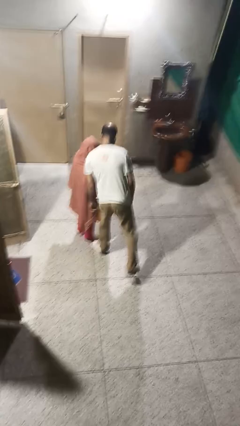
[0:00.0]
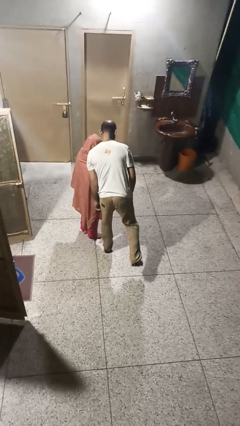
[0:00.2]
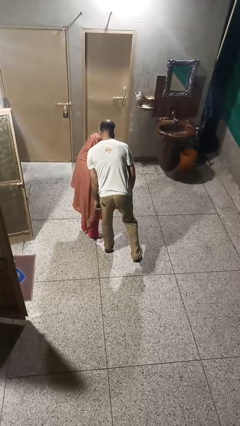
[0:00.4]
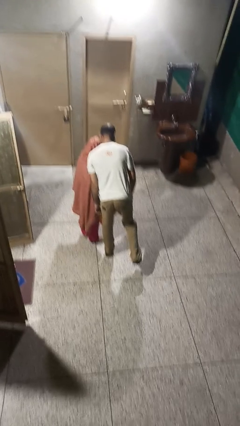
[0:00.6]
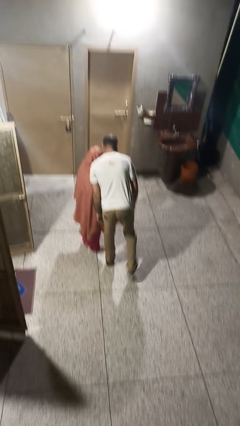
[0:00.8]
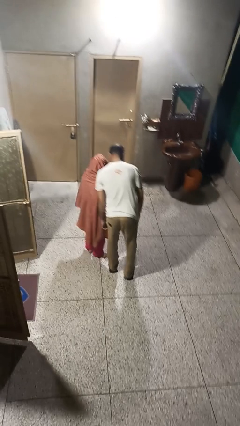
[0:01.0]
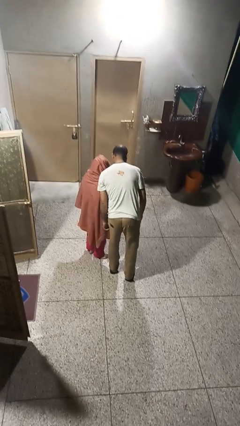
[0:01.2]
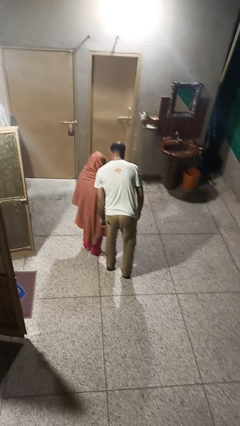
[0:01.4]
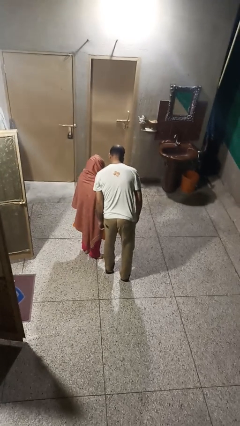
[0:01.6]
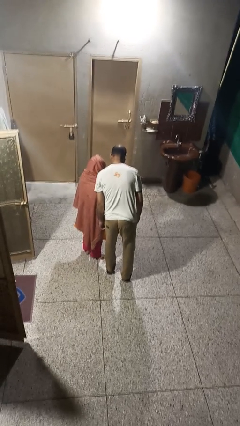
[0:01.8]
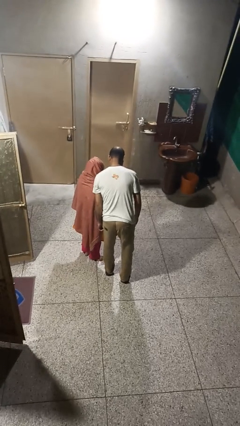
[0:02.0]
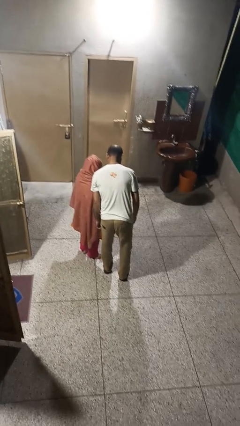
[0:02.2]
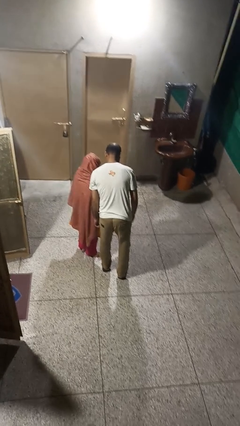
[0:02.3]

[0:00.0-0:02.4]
person bumps into person

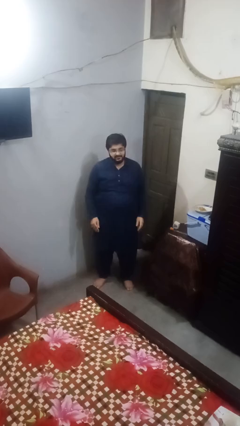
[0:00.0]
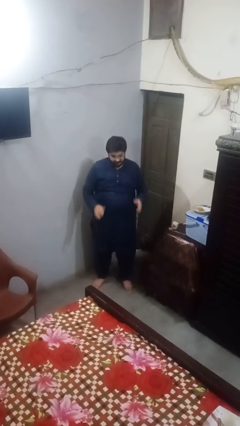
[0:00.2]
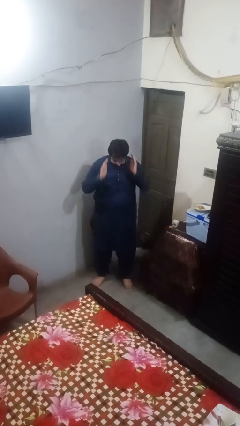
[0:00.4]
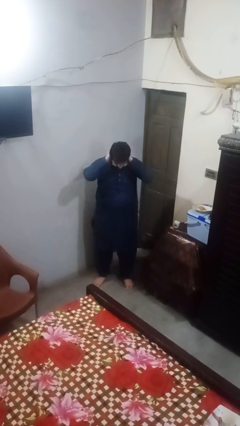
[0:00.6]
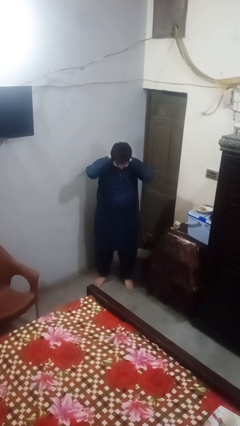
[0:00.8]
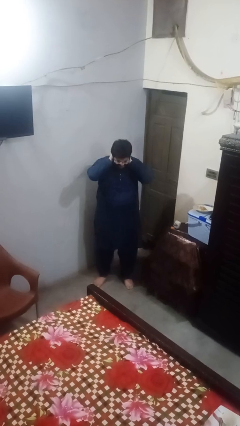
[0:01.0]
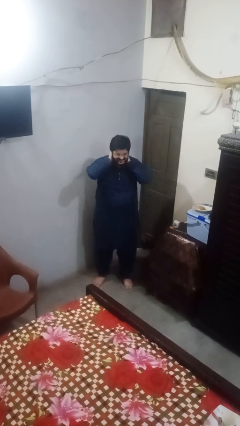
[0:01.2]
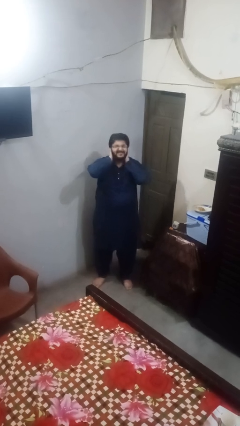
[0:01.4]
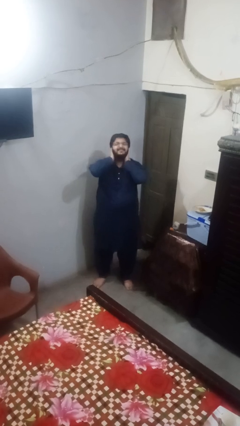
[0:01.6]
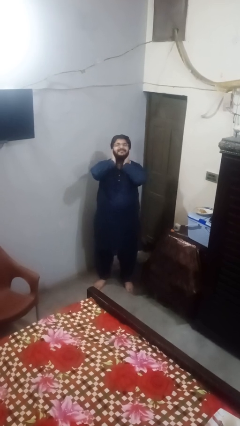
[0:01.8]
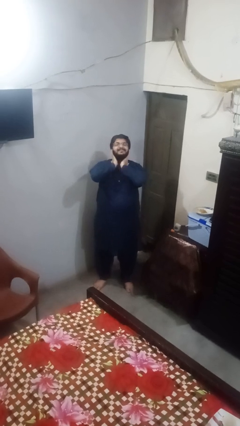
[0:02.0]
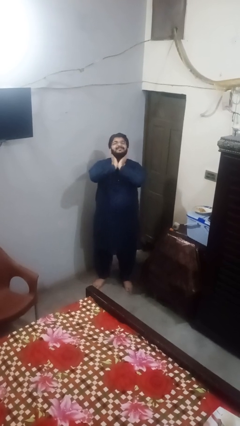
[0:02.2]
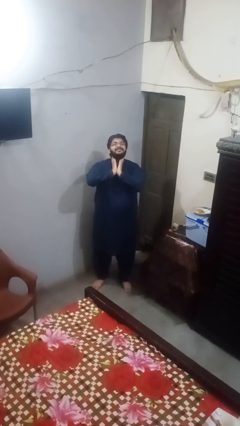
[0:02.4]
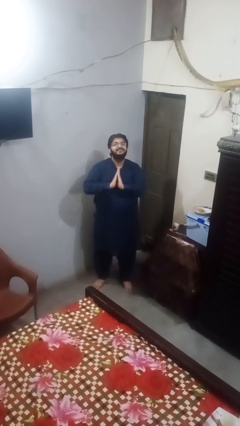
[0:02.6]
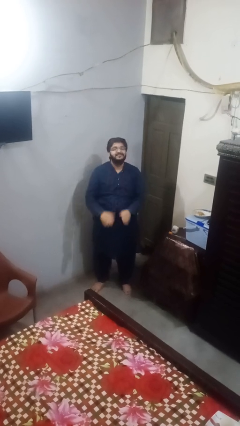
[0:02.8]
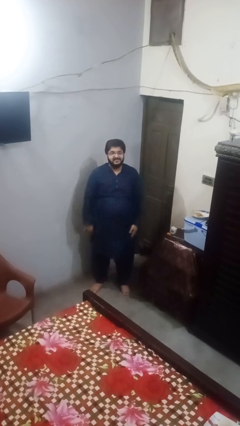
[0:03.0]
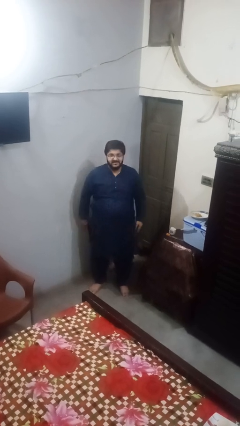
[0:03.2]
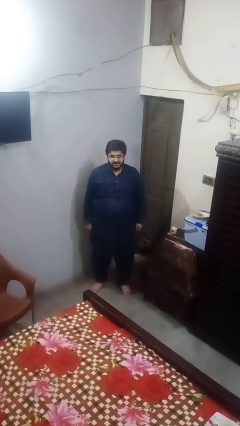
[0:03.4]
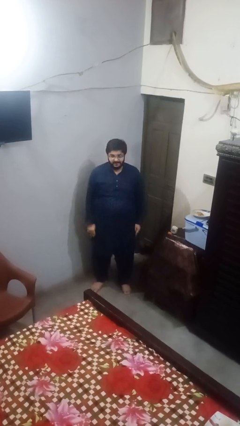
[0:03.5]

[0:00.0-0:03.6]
person rubs neck

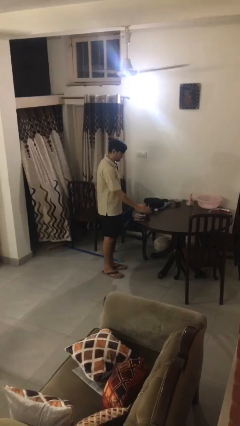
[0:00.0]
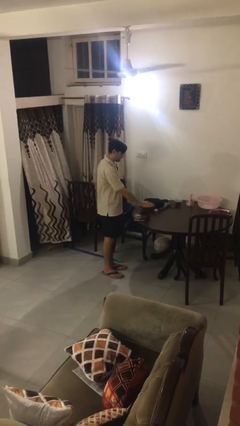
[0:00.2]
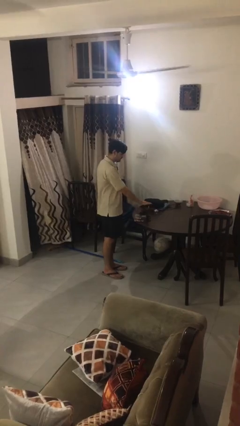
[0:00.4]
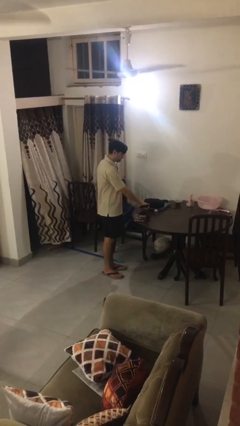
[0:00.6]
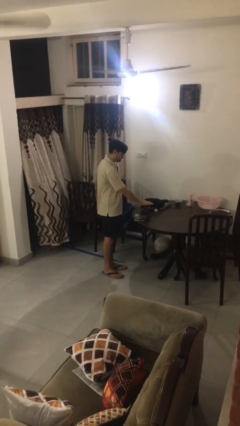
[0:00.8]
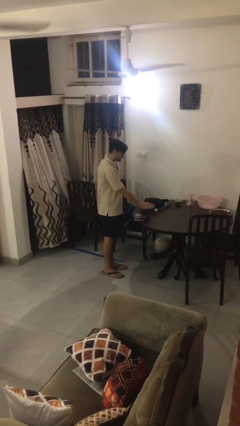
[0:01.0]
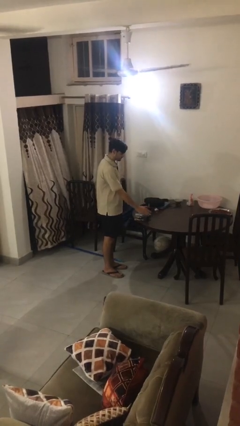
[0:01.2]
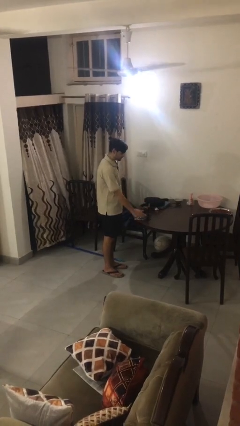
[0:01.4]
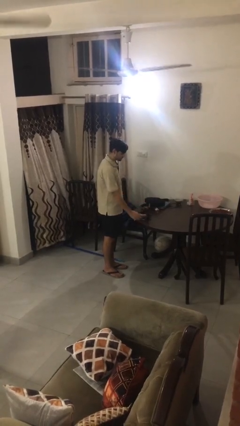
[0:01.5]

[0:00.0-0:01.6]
person waves hand over object

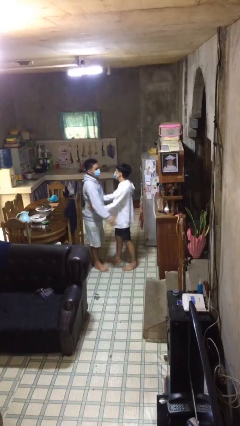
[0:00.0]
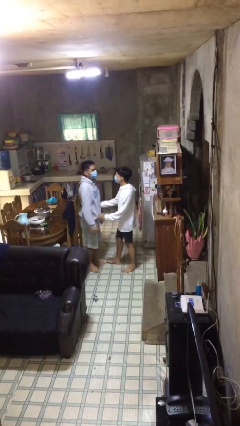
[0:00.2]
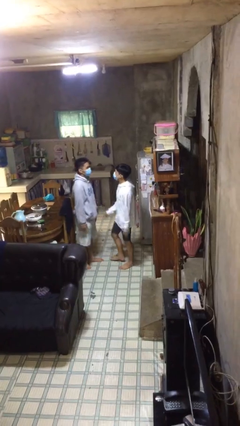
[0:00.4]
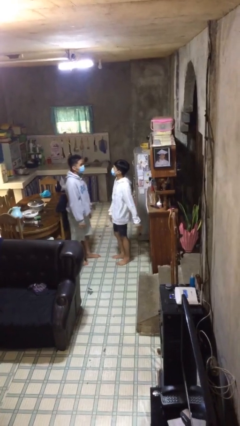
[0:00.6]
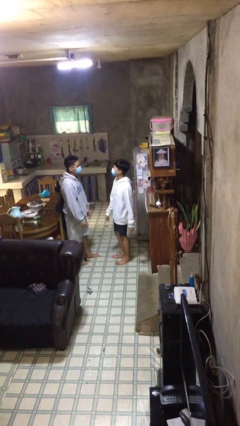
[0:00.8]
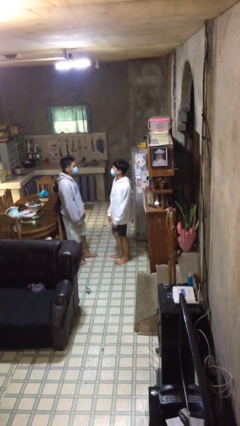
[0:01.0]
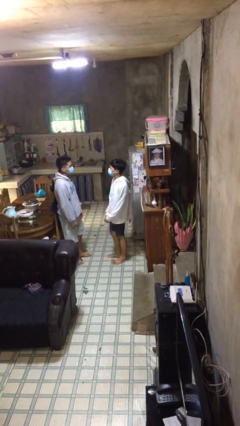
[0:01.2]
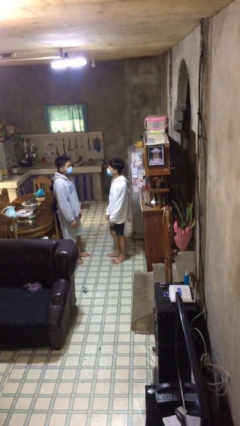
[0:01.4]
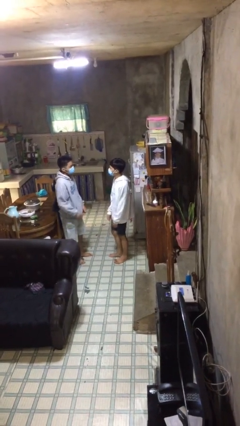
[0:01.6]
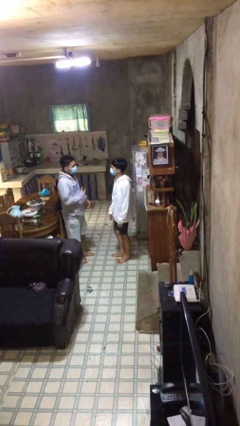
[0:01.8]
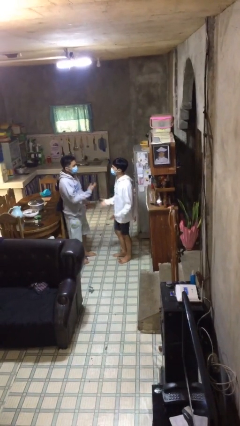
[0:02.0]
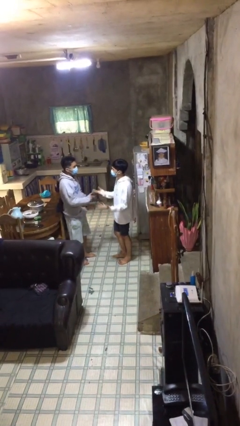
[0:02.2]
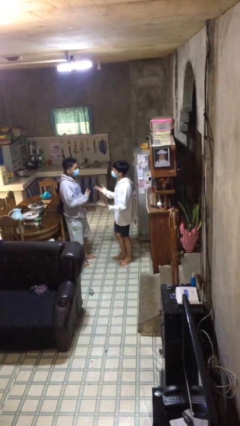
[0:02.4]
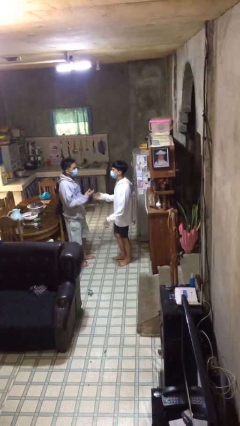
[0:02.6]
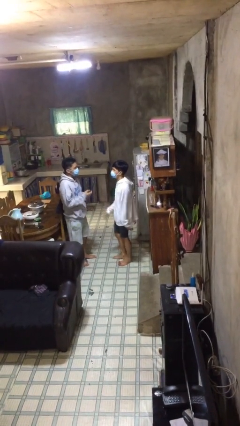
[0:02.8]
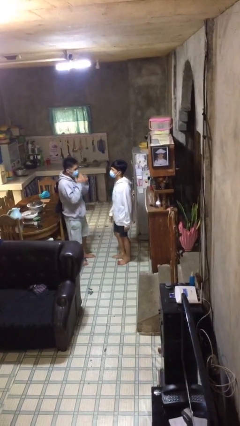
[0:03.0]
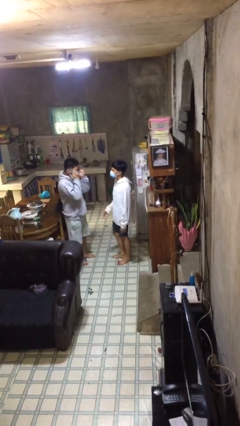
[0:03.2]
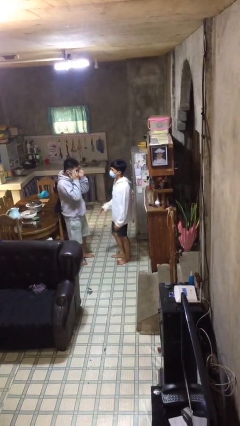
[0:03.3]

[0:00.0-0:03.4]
person talks to person

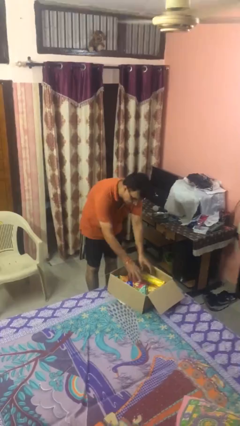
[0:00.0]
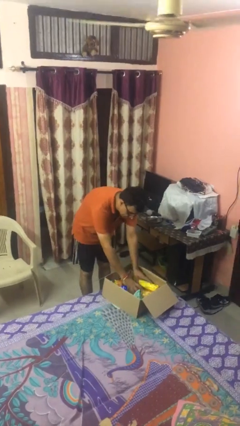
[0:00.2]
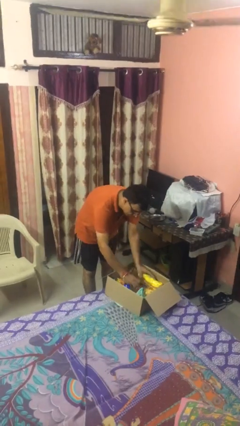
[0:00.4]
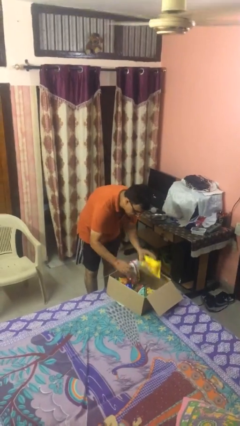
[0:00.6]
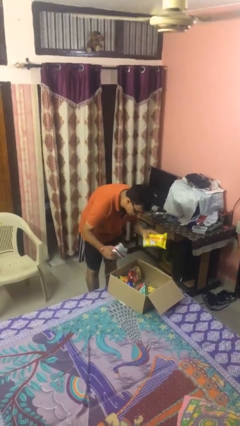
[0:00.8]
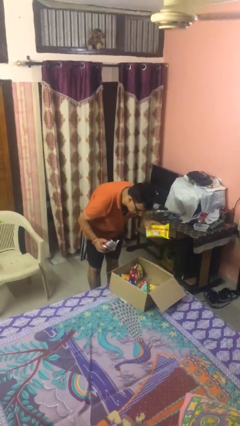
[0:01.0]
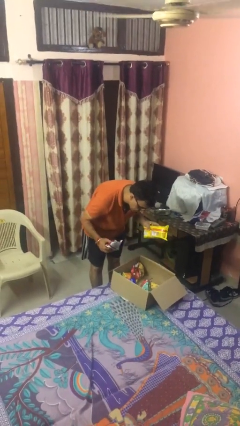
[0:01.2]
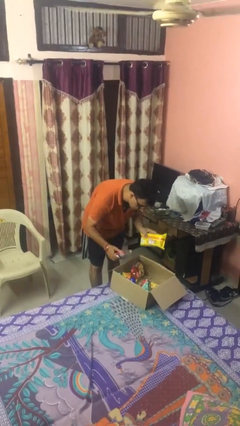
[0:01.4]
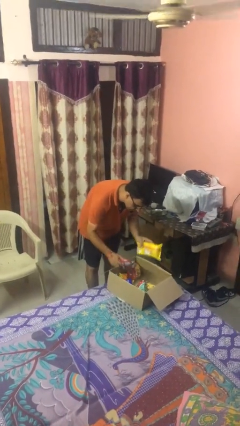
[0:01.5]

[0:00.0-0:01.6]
person searches in box

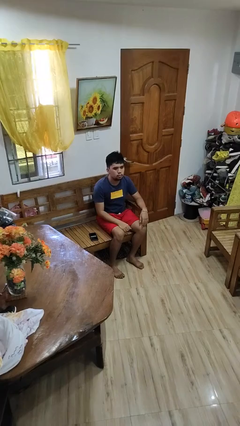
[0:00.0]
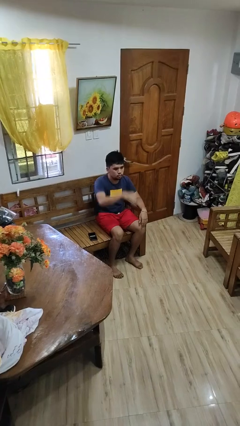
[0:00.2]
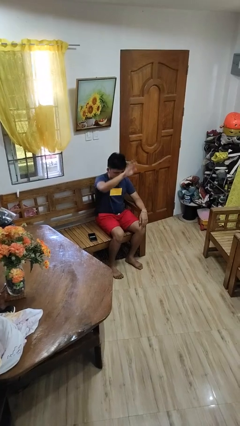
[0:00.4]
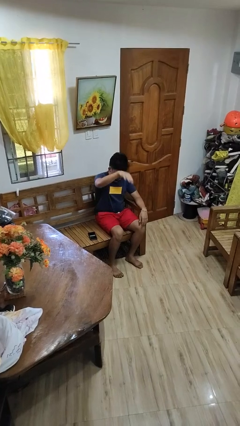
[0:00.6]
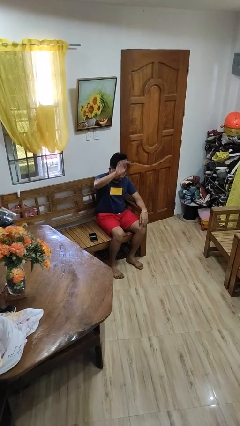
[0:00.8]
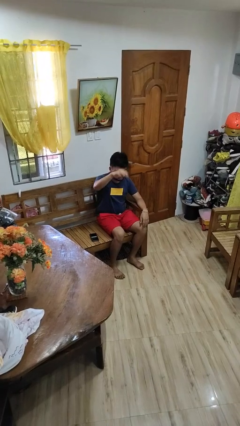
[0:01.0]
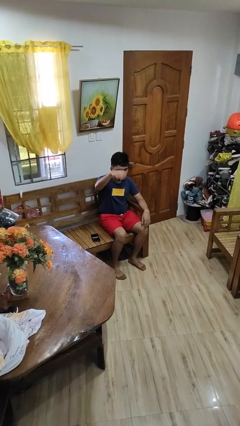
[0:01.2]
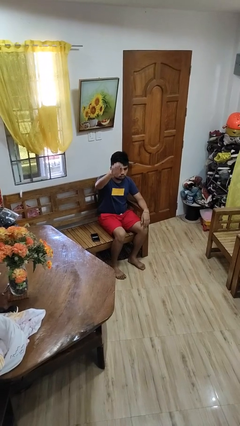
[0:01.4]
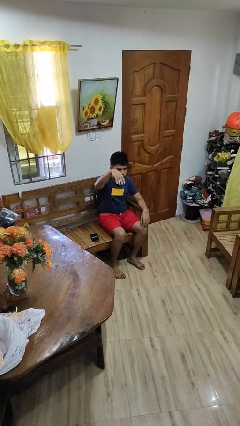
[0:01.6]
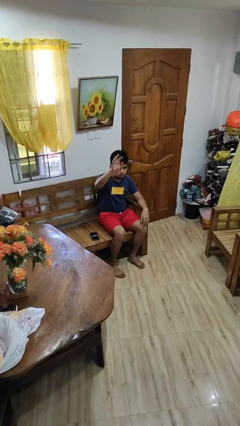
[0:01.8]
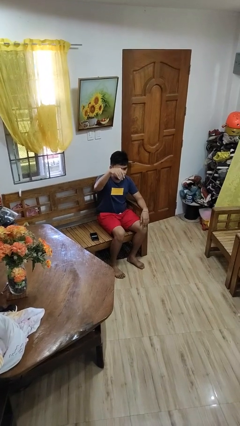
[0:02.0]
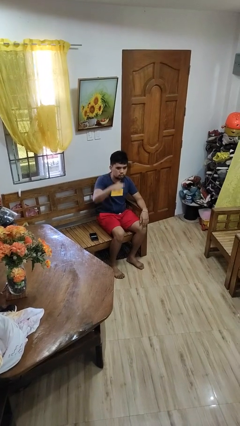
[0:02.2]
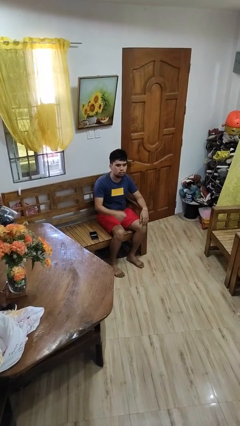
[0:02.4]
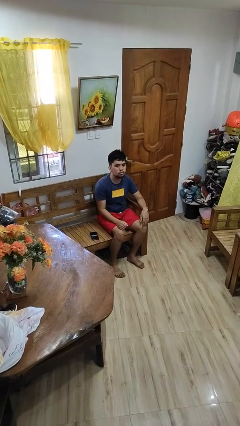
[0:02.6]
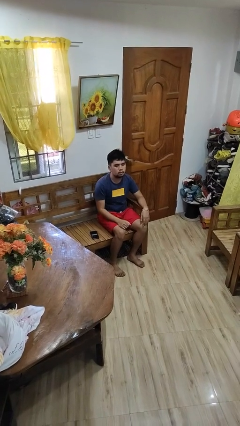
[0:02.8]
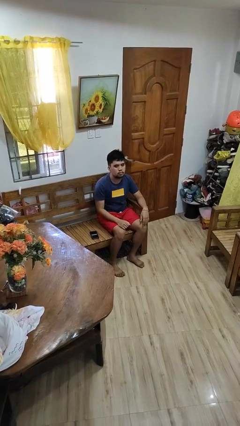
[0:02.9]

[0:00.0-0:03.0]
person gestures come here

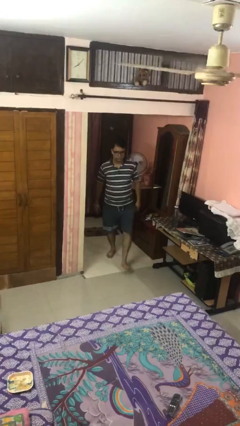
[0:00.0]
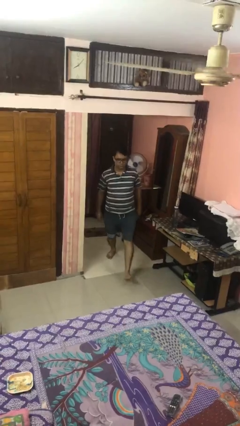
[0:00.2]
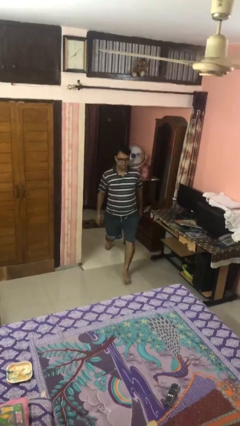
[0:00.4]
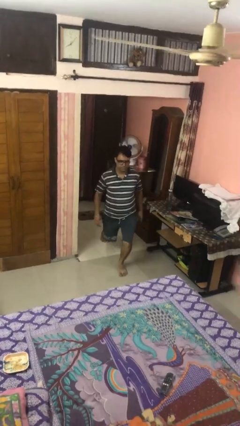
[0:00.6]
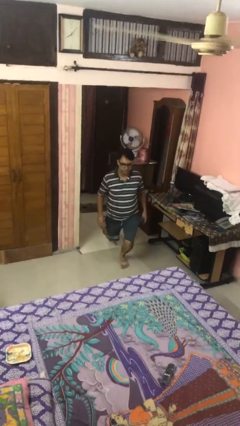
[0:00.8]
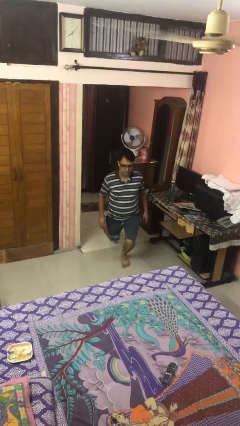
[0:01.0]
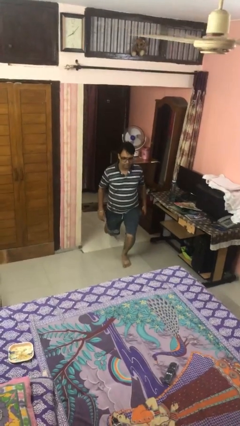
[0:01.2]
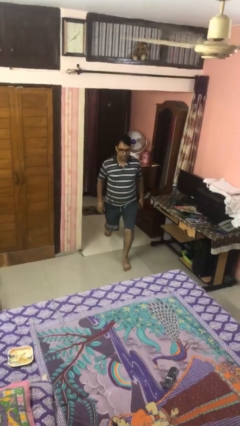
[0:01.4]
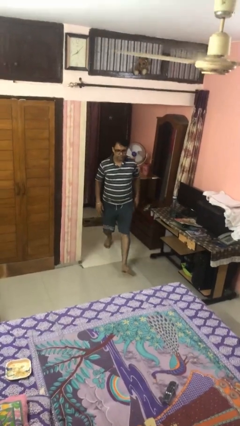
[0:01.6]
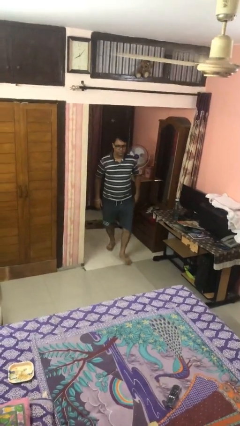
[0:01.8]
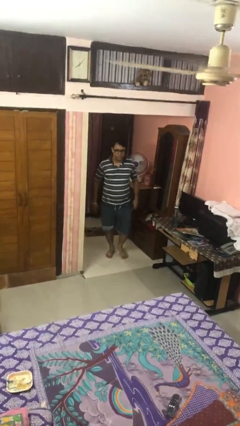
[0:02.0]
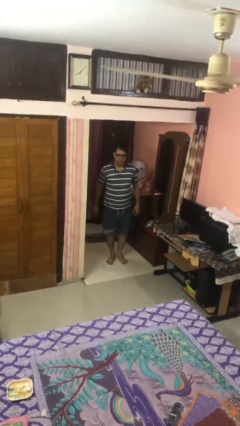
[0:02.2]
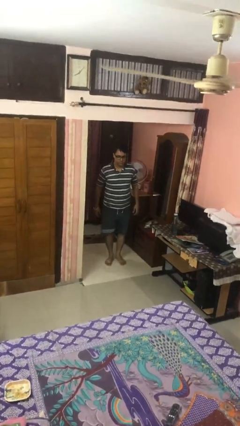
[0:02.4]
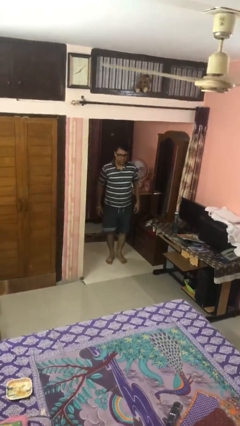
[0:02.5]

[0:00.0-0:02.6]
person exercises with lunges
